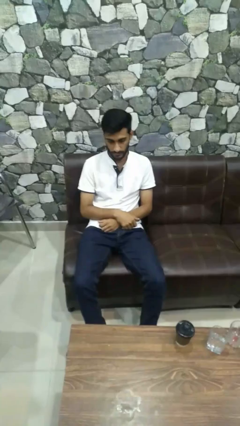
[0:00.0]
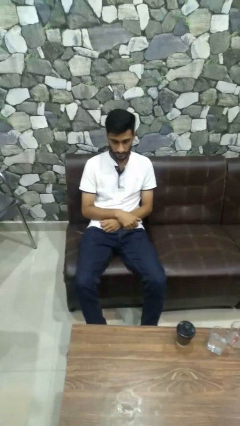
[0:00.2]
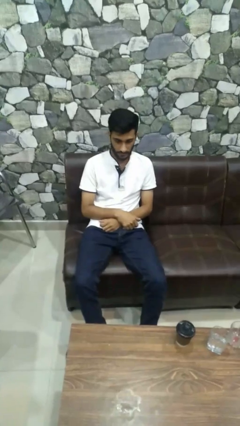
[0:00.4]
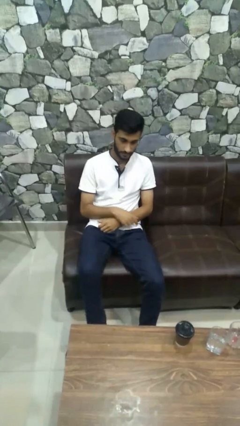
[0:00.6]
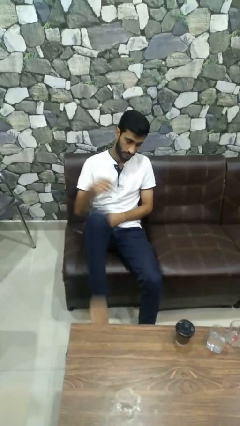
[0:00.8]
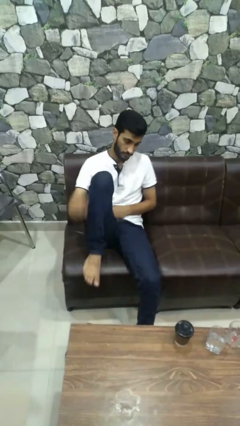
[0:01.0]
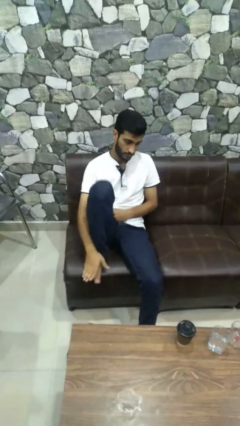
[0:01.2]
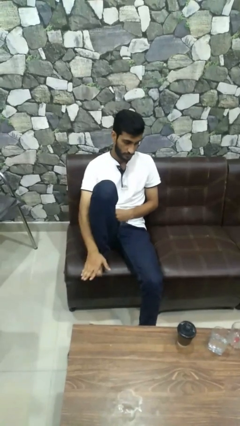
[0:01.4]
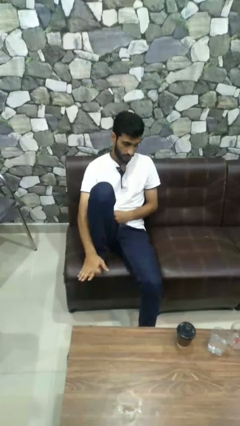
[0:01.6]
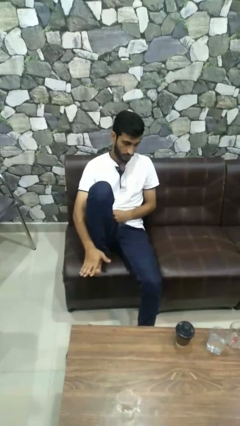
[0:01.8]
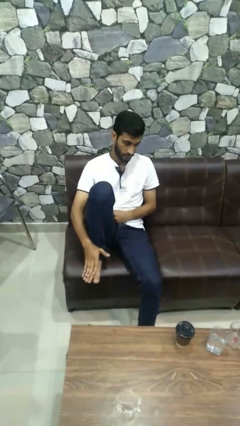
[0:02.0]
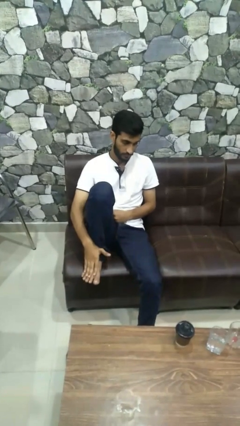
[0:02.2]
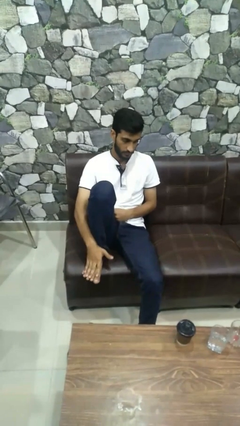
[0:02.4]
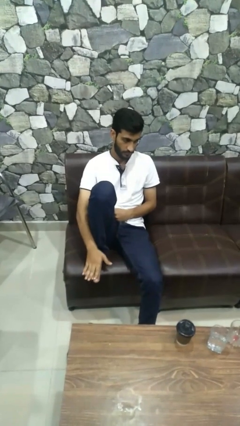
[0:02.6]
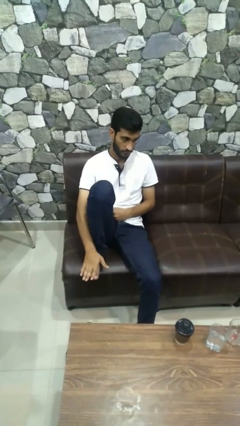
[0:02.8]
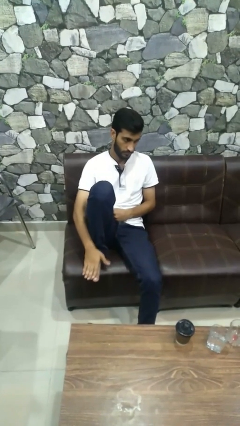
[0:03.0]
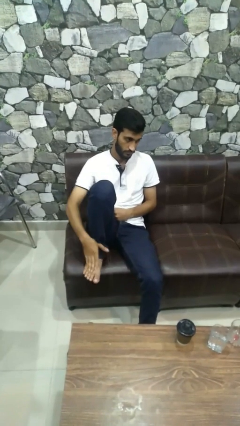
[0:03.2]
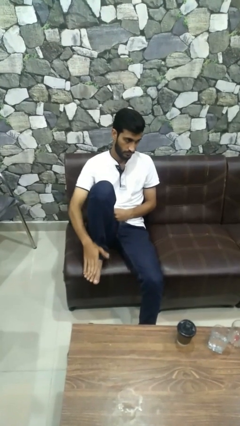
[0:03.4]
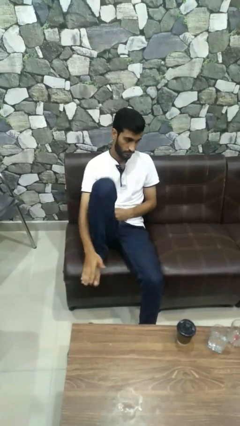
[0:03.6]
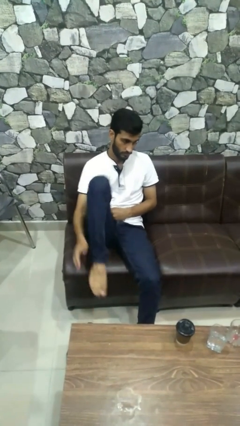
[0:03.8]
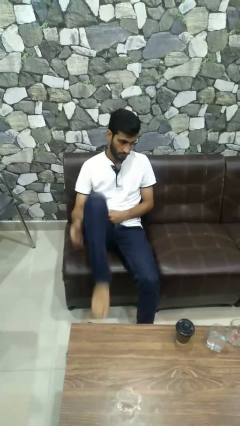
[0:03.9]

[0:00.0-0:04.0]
person rubs foot

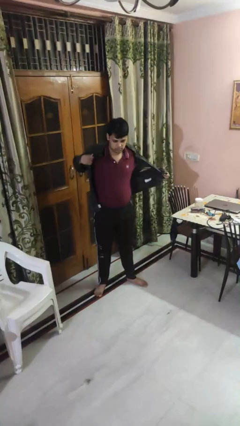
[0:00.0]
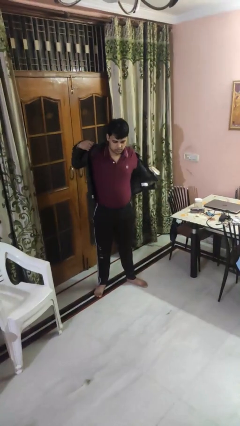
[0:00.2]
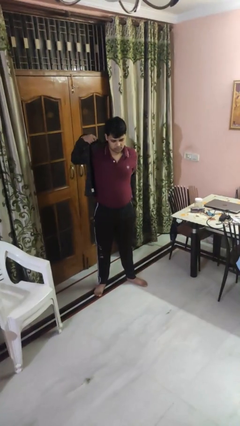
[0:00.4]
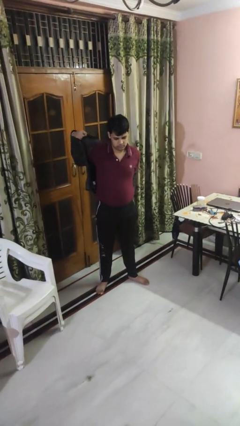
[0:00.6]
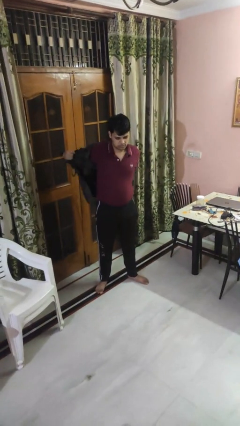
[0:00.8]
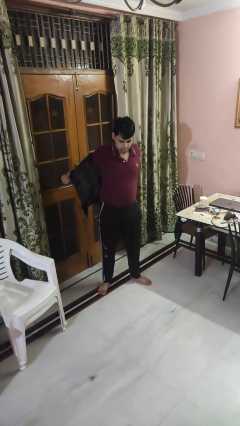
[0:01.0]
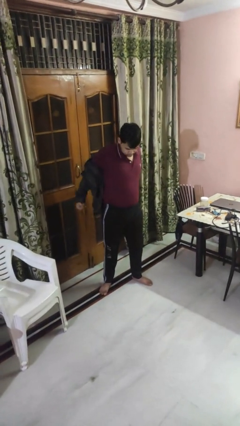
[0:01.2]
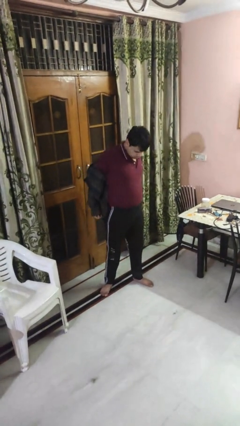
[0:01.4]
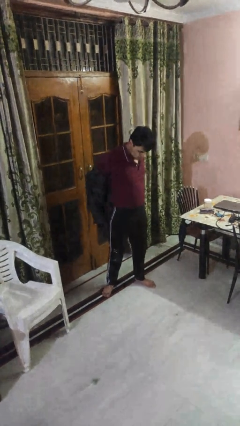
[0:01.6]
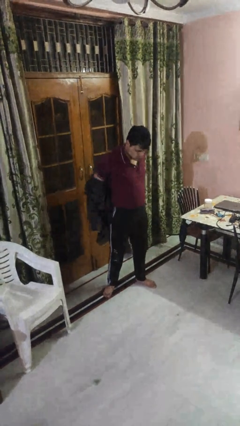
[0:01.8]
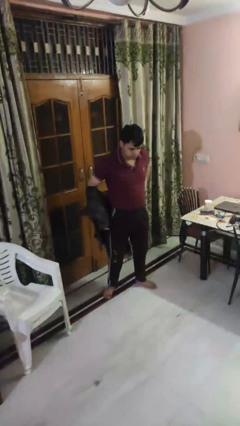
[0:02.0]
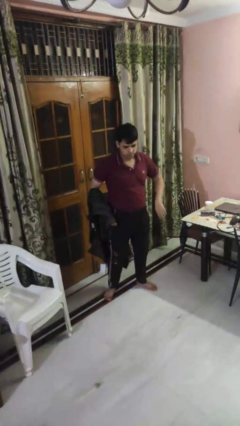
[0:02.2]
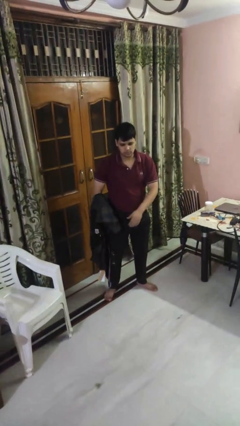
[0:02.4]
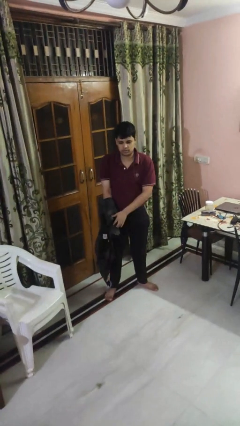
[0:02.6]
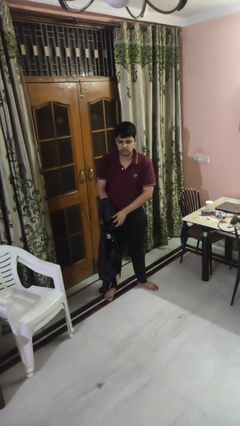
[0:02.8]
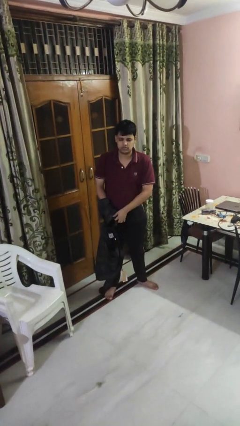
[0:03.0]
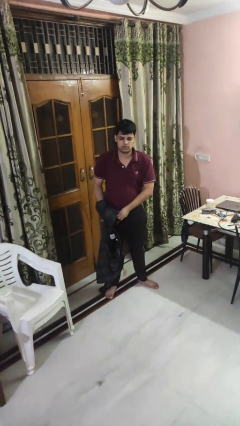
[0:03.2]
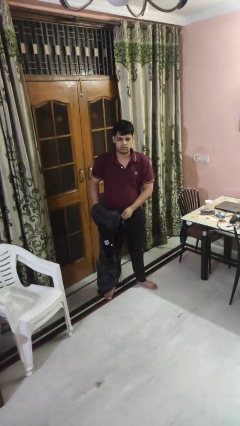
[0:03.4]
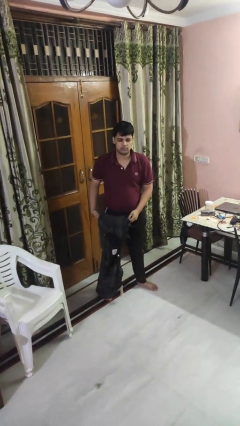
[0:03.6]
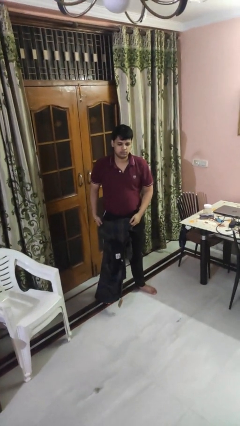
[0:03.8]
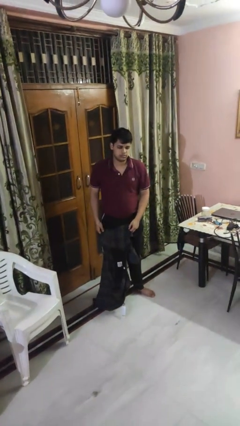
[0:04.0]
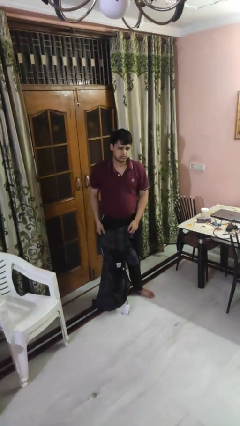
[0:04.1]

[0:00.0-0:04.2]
person takes off shirt

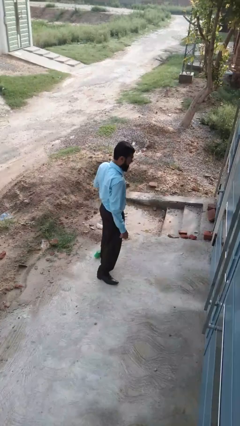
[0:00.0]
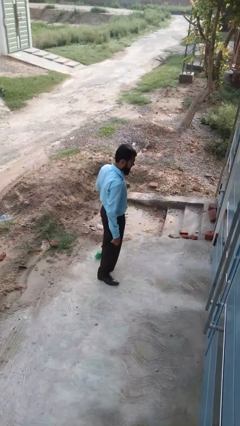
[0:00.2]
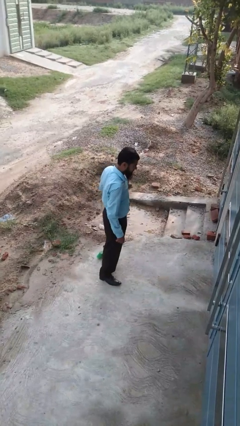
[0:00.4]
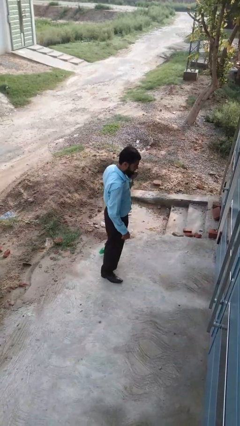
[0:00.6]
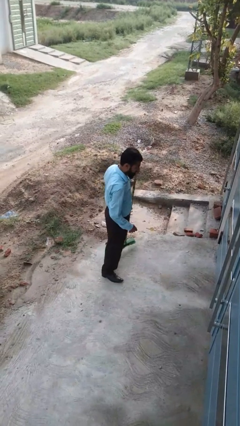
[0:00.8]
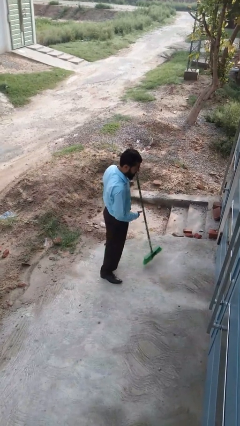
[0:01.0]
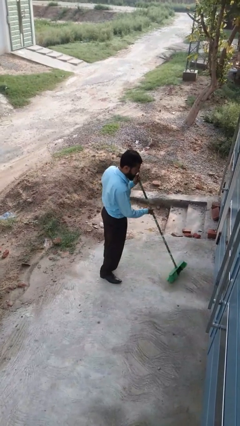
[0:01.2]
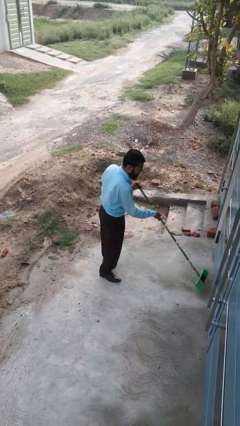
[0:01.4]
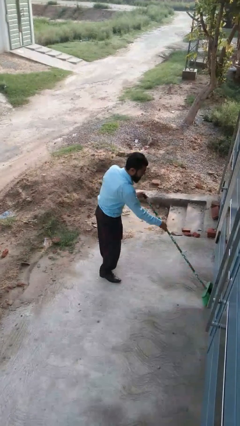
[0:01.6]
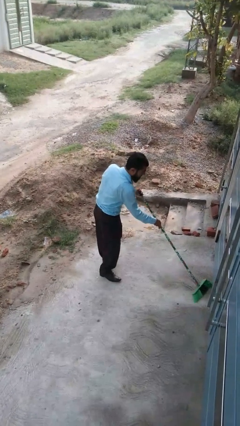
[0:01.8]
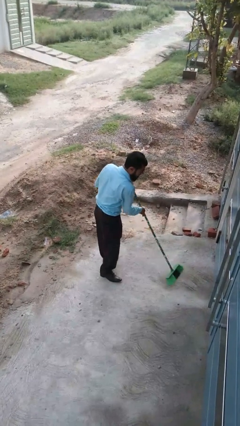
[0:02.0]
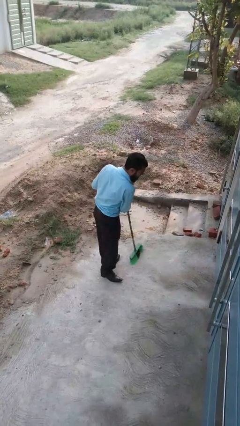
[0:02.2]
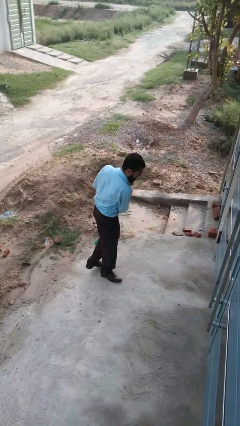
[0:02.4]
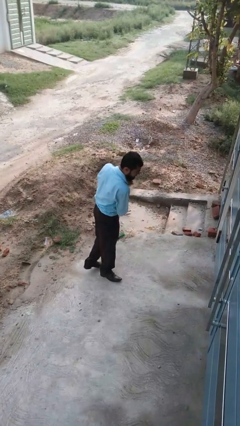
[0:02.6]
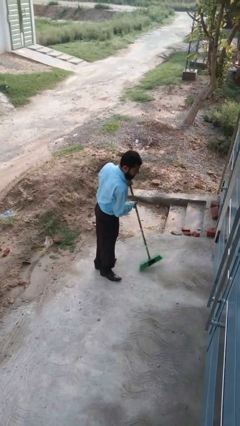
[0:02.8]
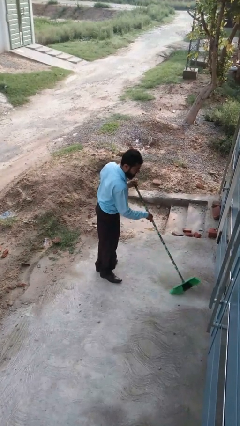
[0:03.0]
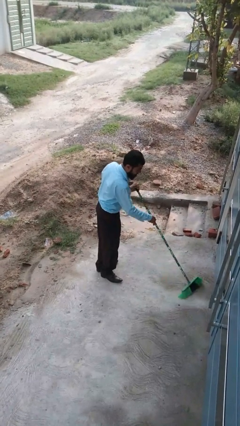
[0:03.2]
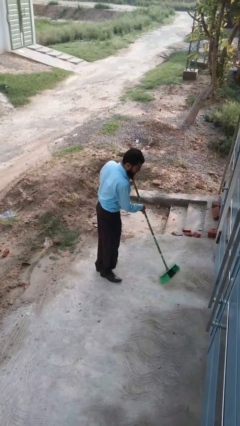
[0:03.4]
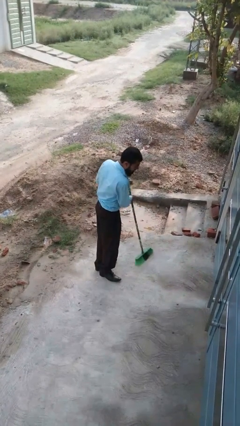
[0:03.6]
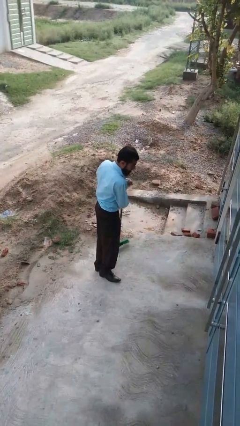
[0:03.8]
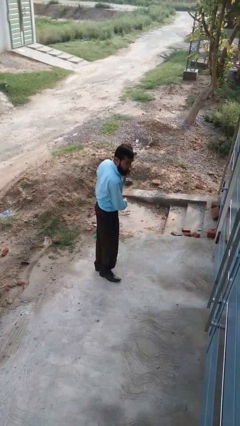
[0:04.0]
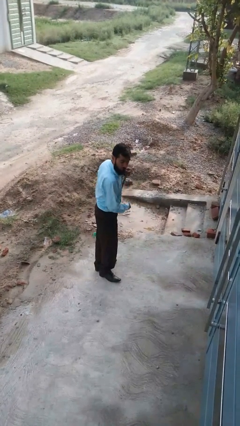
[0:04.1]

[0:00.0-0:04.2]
person sweeps floor

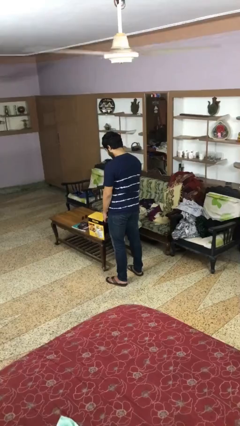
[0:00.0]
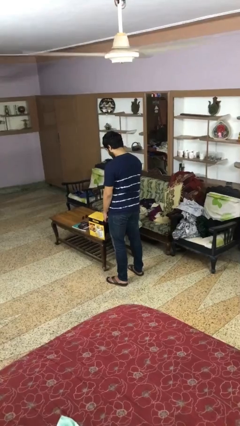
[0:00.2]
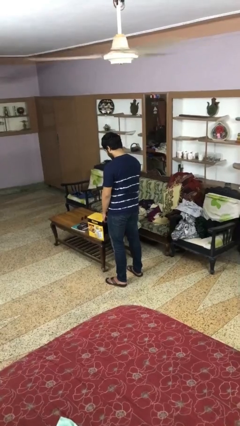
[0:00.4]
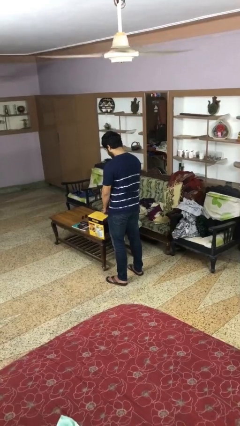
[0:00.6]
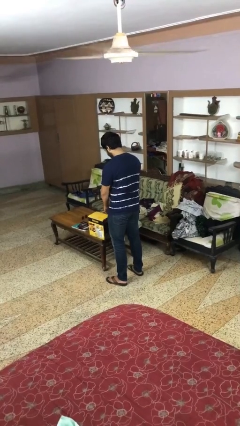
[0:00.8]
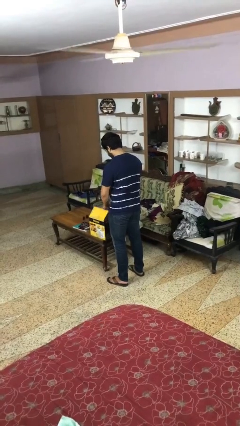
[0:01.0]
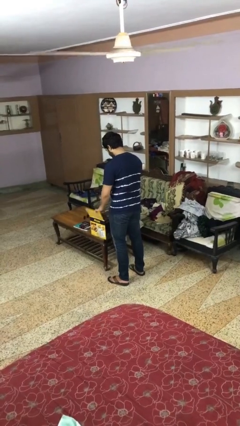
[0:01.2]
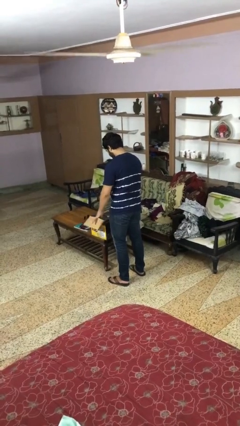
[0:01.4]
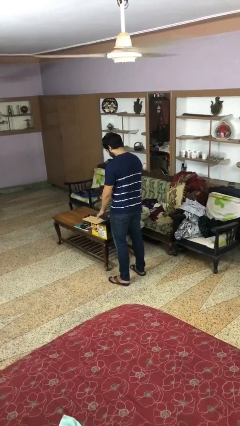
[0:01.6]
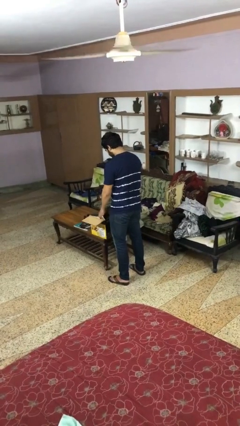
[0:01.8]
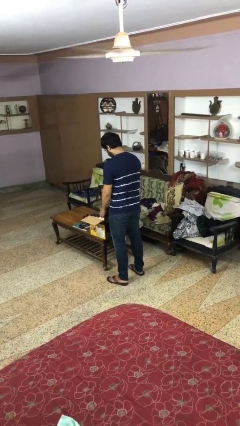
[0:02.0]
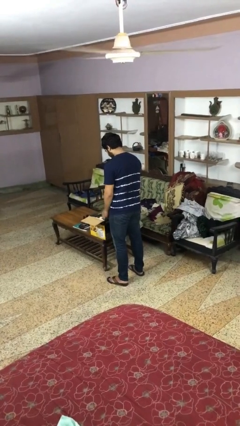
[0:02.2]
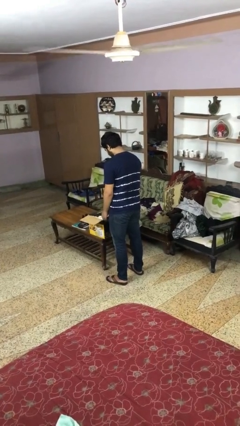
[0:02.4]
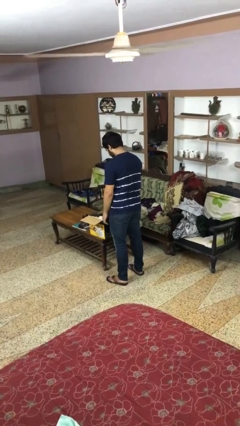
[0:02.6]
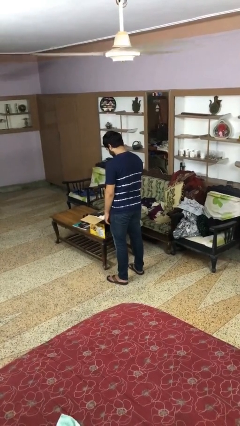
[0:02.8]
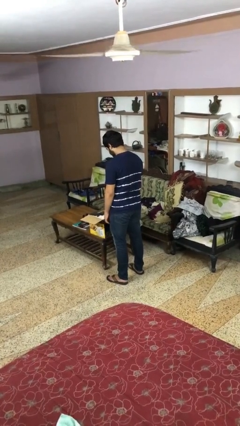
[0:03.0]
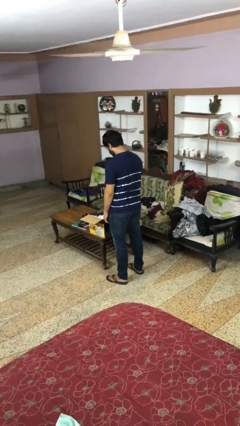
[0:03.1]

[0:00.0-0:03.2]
person opens box

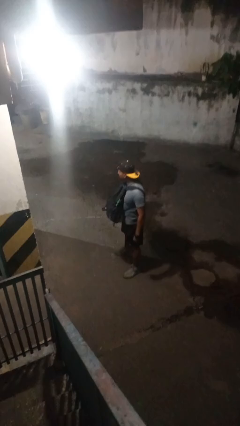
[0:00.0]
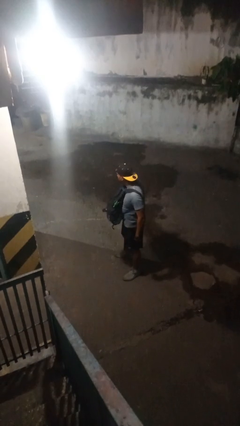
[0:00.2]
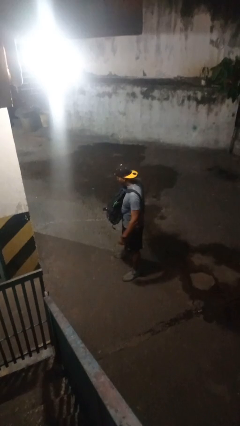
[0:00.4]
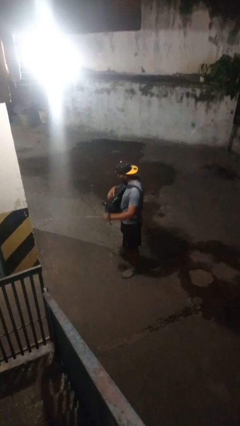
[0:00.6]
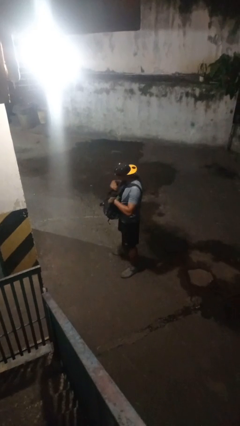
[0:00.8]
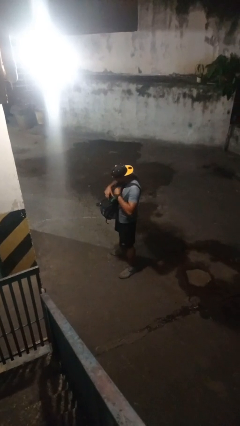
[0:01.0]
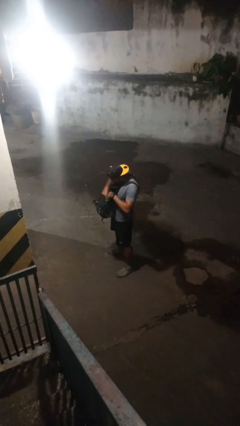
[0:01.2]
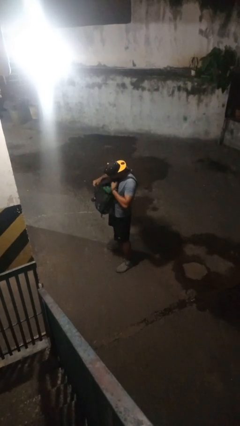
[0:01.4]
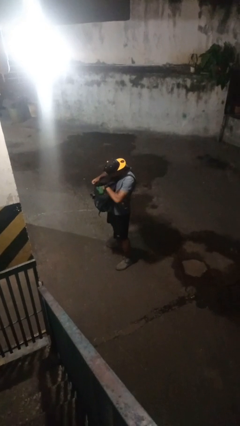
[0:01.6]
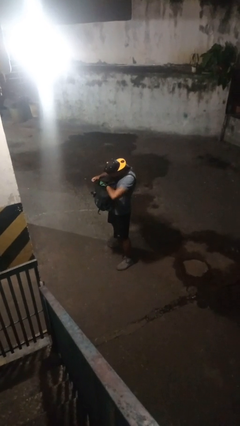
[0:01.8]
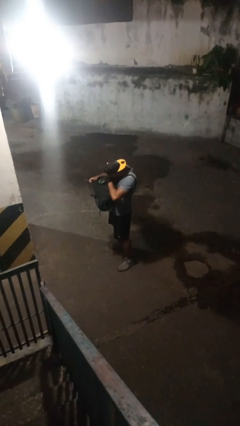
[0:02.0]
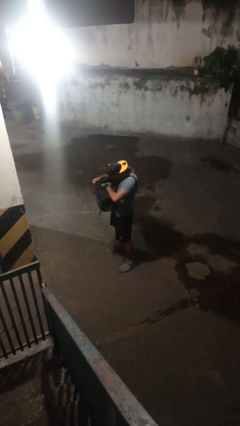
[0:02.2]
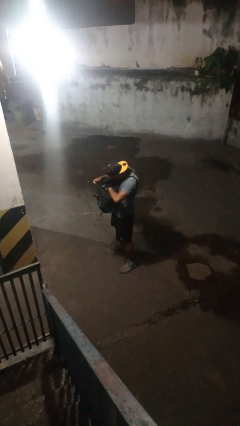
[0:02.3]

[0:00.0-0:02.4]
person searches in backpack
